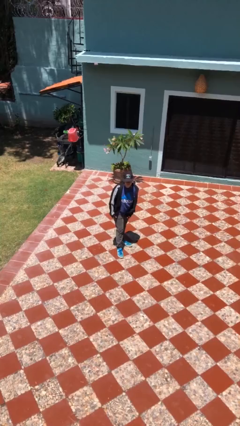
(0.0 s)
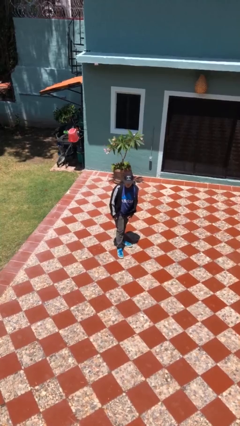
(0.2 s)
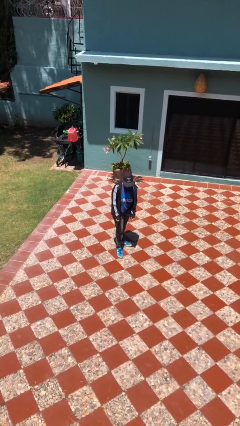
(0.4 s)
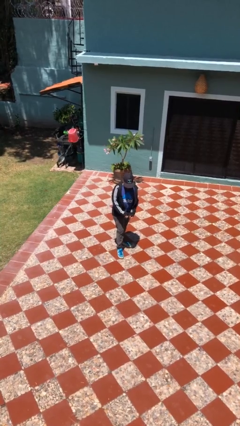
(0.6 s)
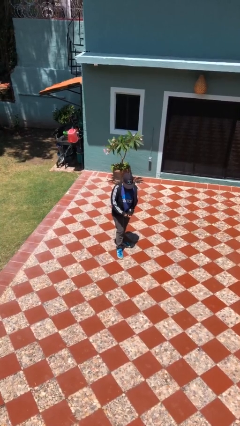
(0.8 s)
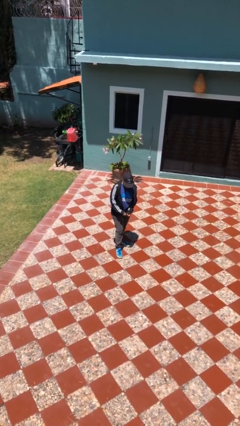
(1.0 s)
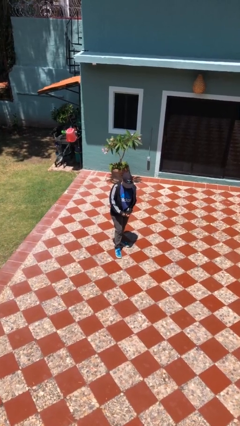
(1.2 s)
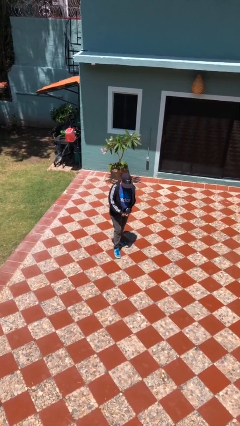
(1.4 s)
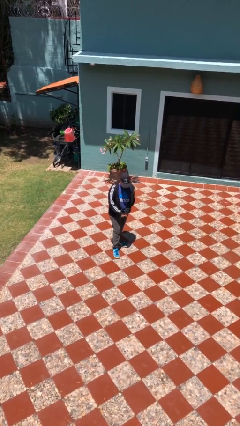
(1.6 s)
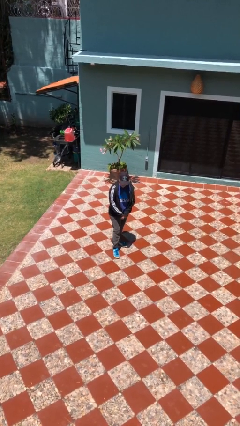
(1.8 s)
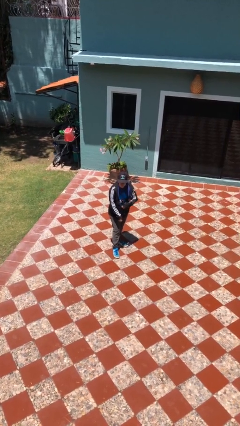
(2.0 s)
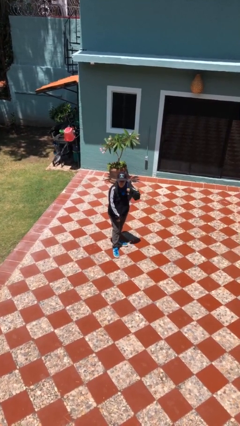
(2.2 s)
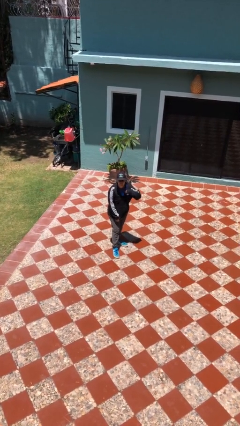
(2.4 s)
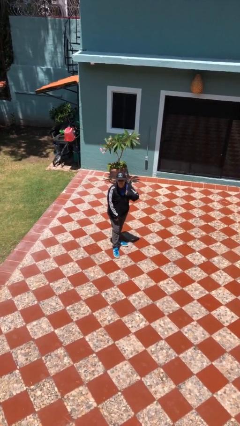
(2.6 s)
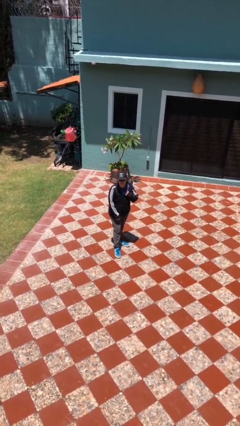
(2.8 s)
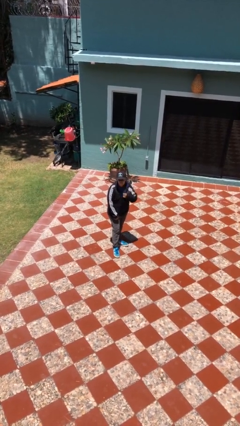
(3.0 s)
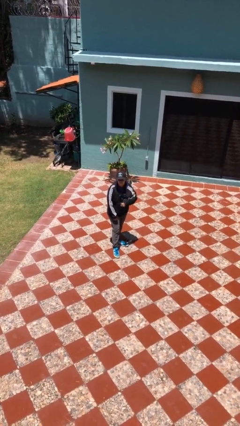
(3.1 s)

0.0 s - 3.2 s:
person zips up jacket

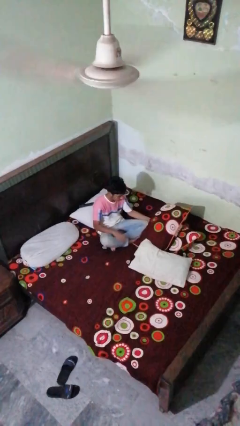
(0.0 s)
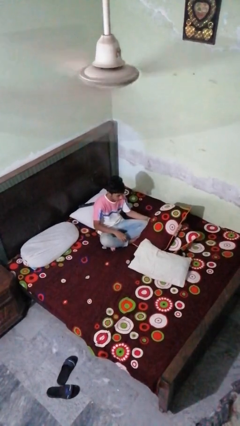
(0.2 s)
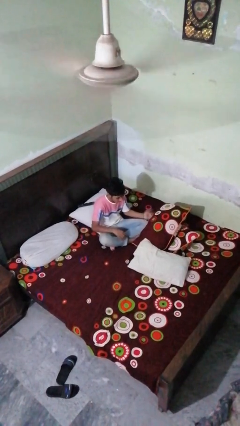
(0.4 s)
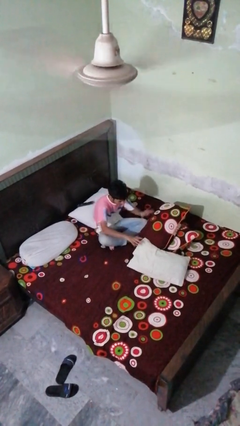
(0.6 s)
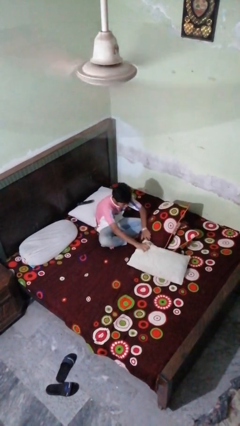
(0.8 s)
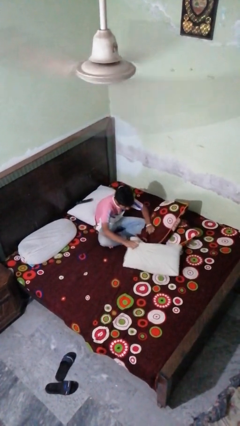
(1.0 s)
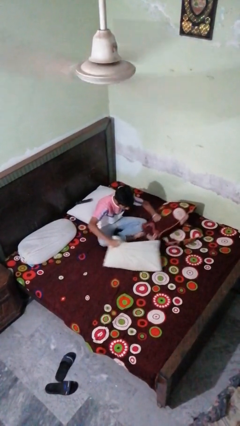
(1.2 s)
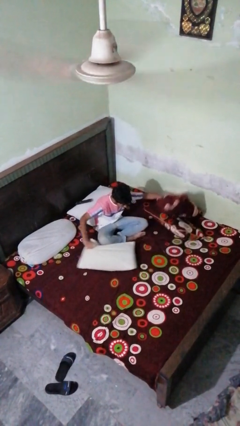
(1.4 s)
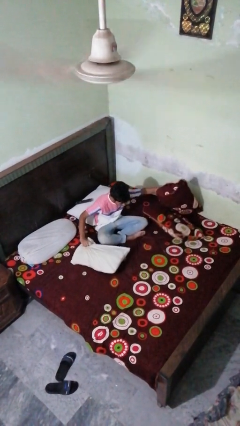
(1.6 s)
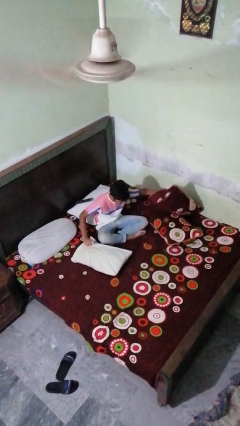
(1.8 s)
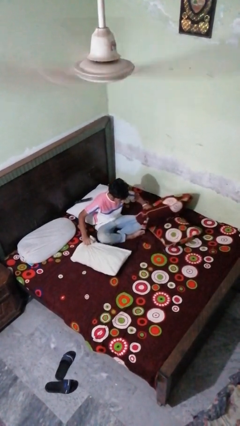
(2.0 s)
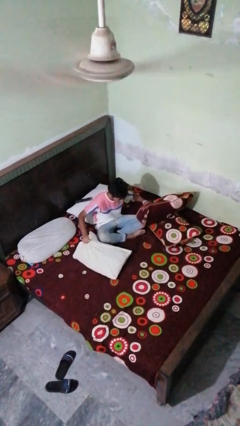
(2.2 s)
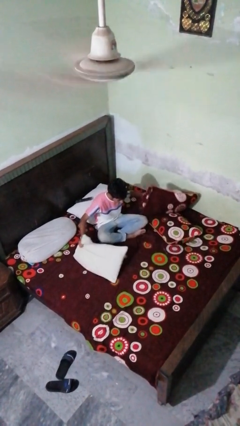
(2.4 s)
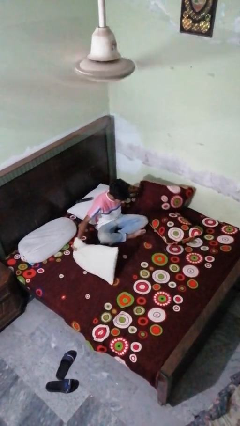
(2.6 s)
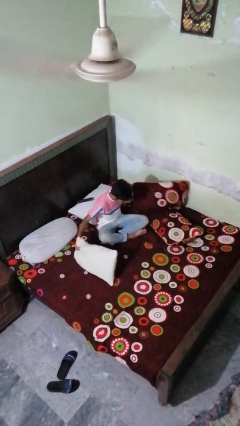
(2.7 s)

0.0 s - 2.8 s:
person searches under bed

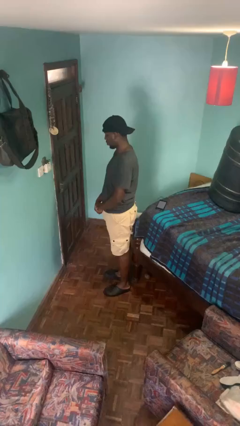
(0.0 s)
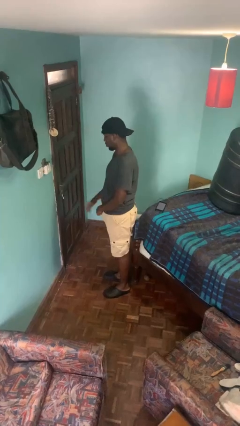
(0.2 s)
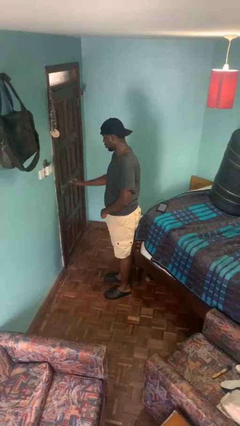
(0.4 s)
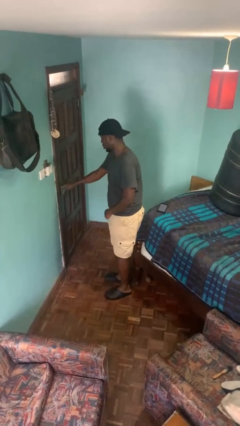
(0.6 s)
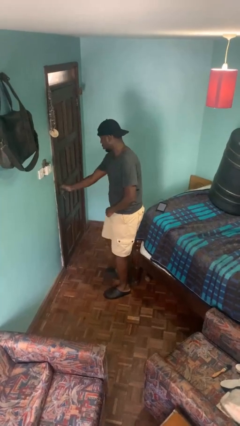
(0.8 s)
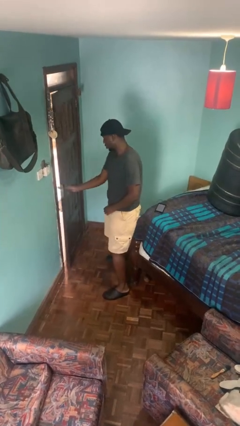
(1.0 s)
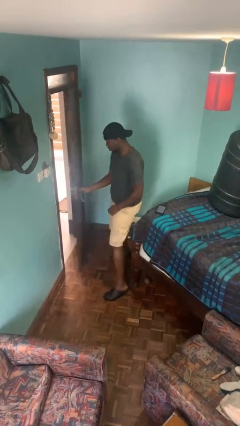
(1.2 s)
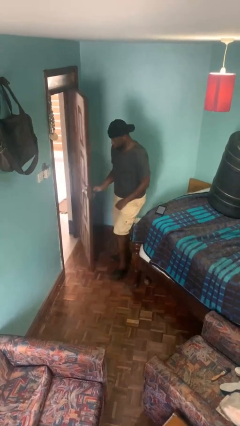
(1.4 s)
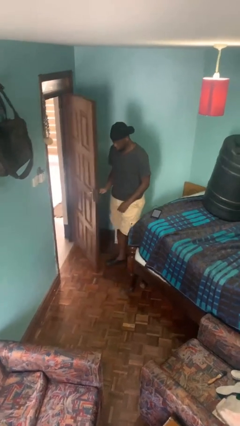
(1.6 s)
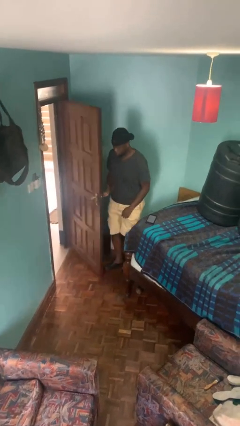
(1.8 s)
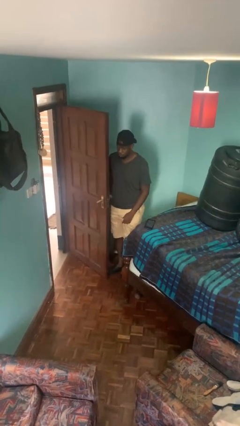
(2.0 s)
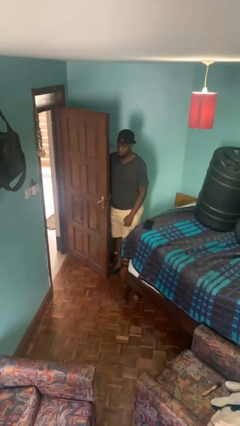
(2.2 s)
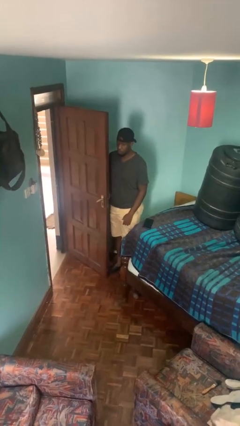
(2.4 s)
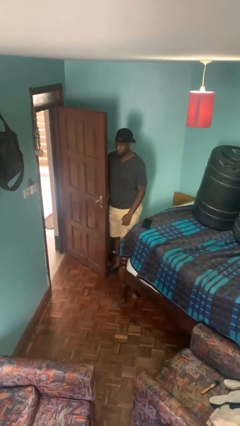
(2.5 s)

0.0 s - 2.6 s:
person opens facility door

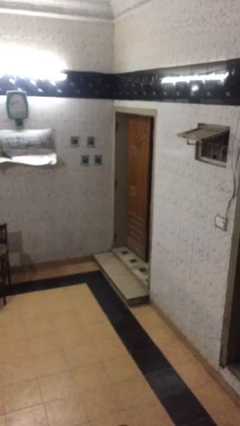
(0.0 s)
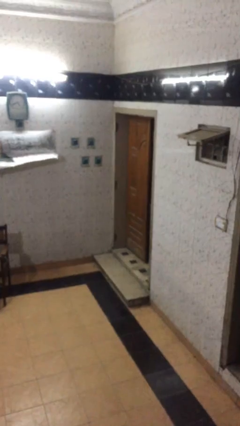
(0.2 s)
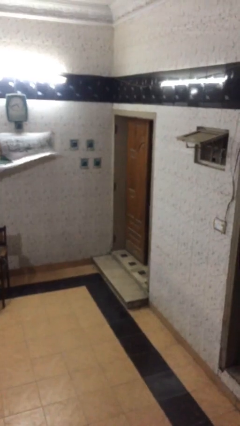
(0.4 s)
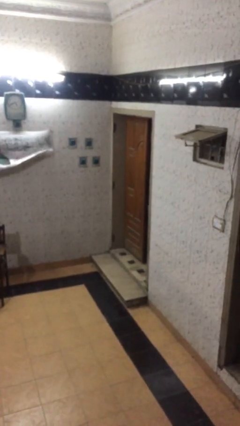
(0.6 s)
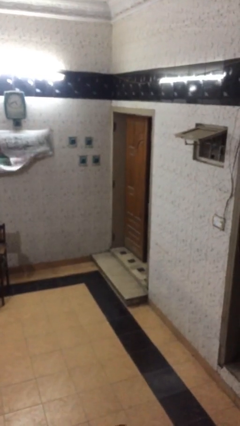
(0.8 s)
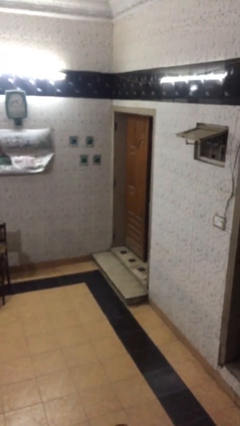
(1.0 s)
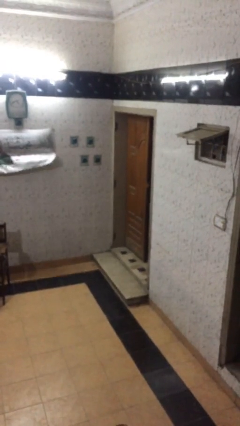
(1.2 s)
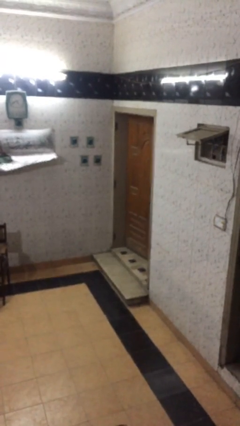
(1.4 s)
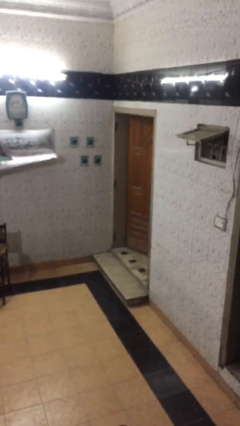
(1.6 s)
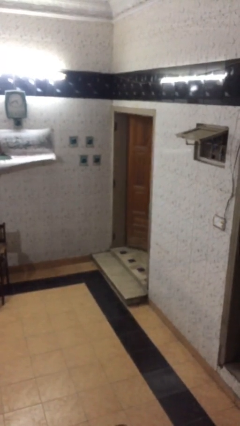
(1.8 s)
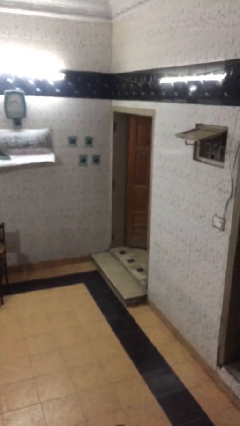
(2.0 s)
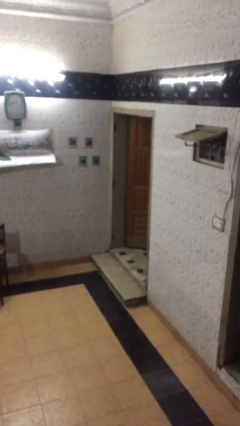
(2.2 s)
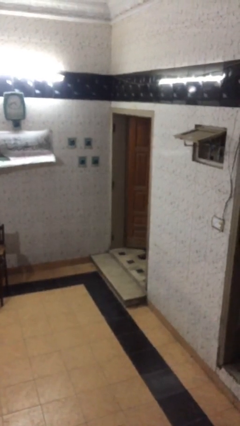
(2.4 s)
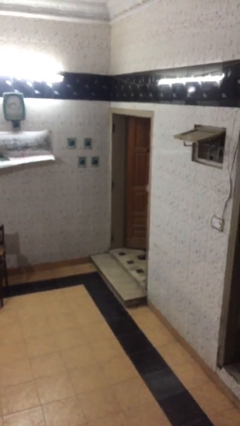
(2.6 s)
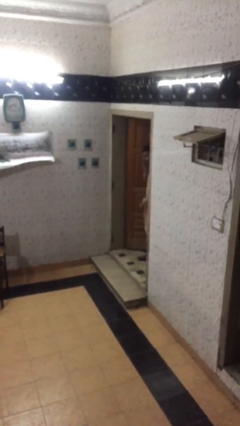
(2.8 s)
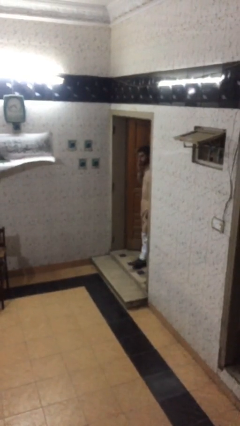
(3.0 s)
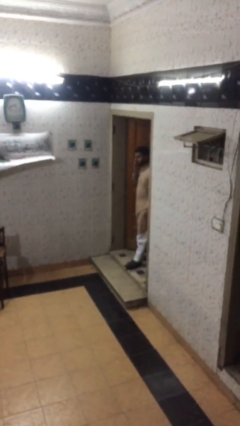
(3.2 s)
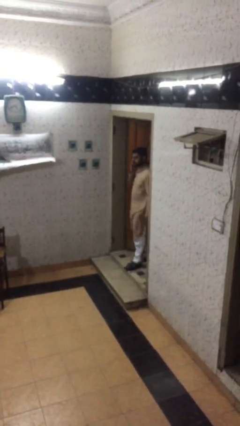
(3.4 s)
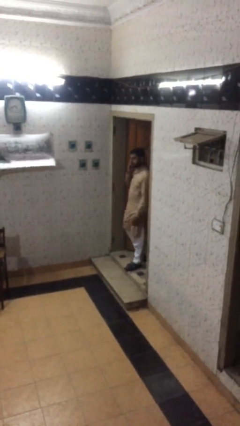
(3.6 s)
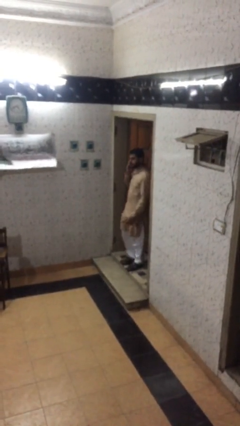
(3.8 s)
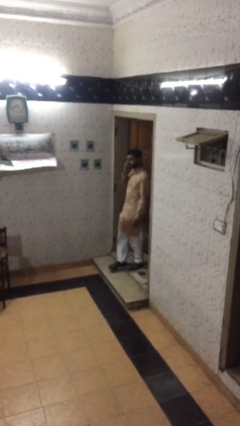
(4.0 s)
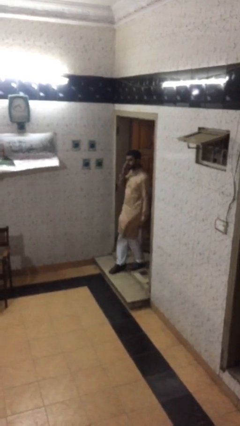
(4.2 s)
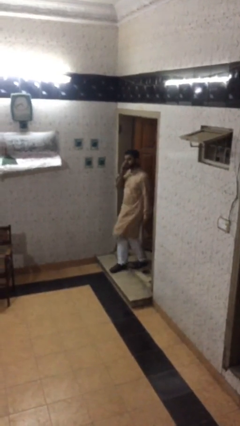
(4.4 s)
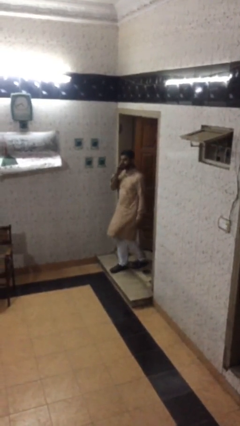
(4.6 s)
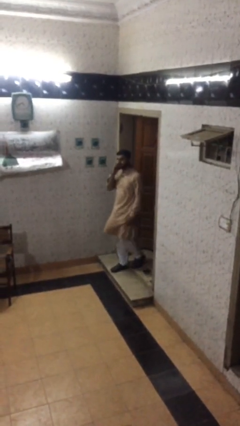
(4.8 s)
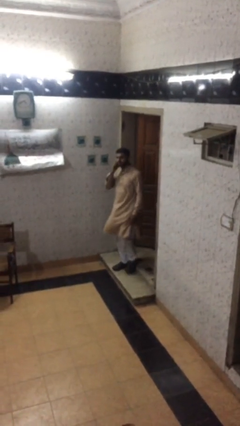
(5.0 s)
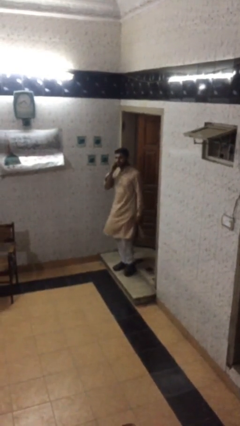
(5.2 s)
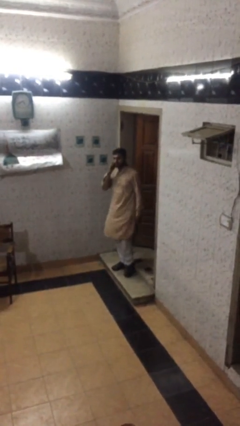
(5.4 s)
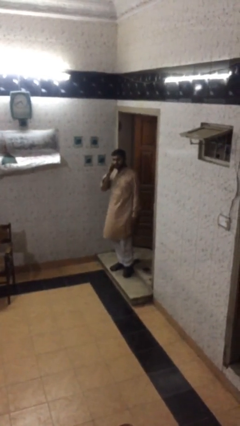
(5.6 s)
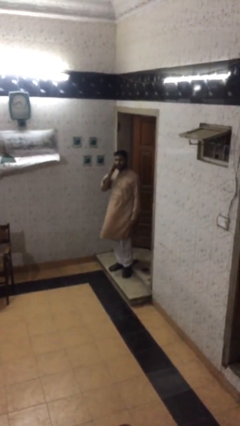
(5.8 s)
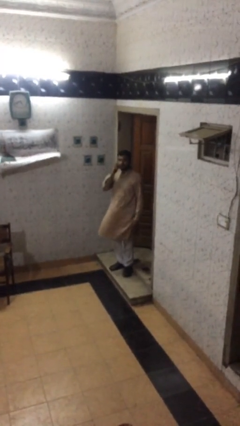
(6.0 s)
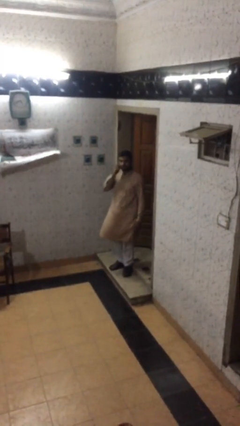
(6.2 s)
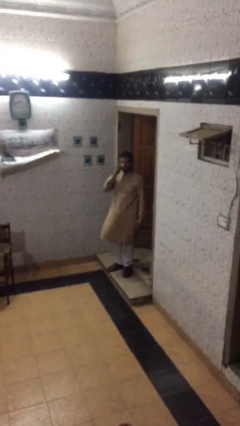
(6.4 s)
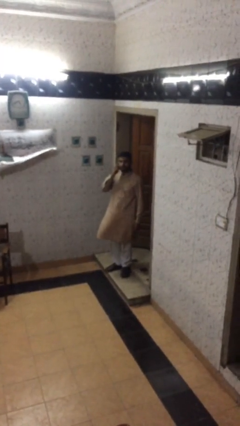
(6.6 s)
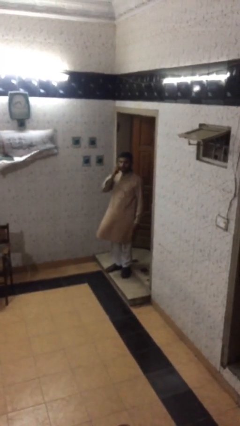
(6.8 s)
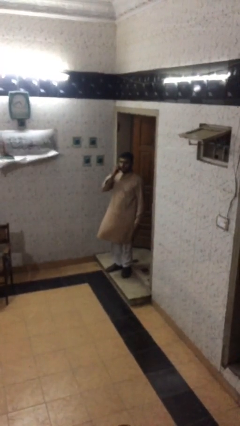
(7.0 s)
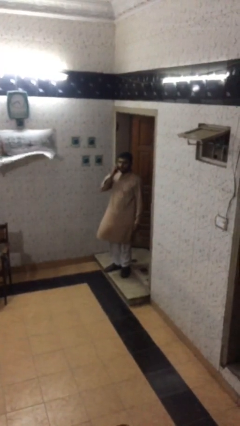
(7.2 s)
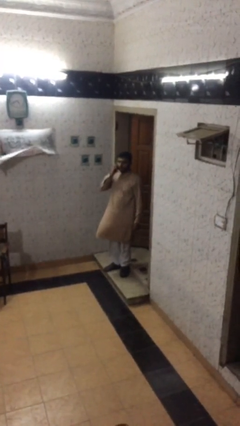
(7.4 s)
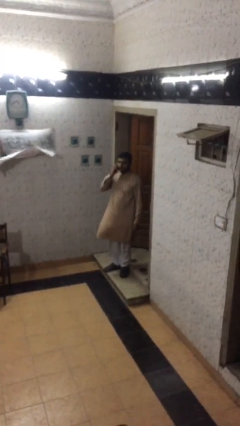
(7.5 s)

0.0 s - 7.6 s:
person enters scene through structure

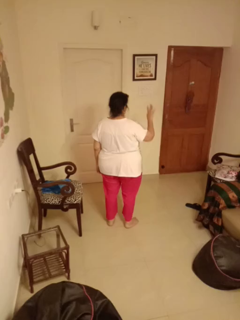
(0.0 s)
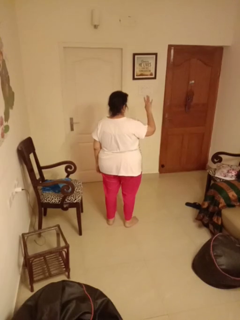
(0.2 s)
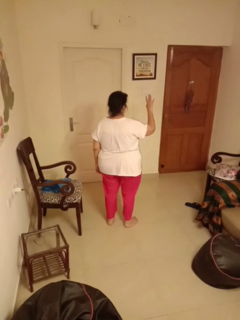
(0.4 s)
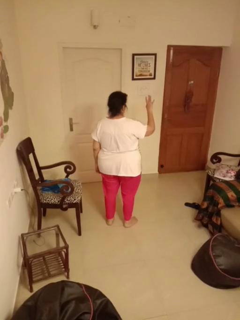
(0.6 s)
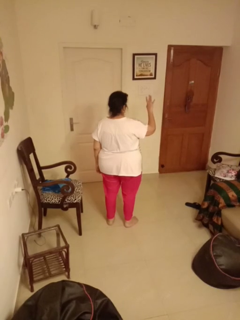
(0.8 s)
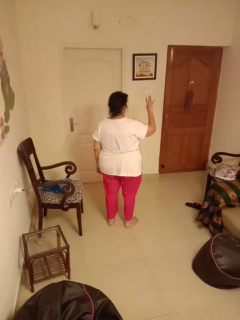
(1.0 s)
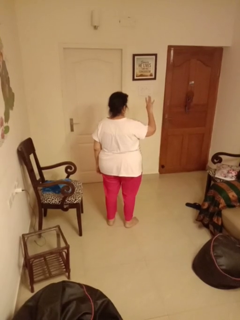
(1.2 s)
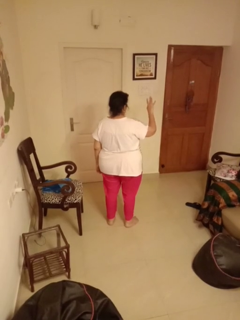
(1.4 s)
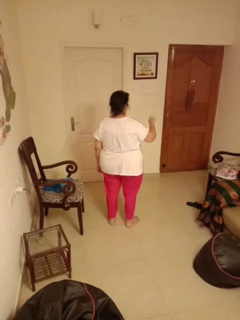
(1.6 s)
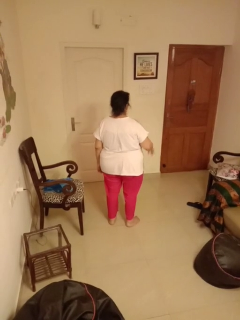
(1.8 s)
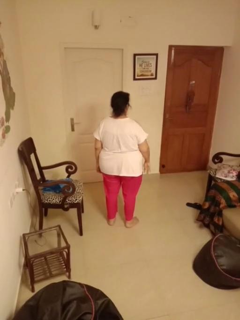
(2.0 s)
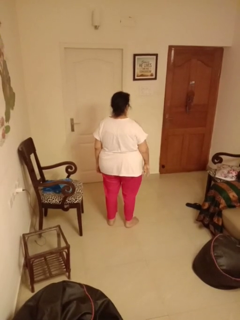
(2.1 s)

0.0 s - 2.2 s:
person gestures number four
